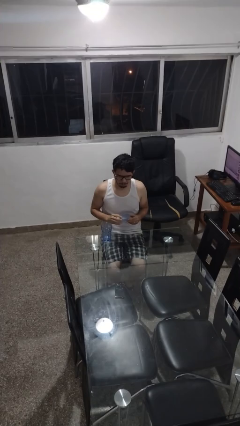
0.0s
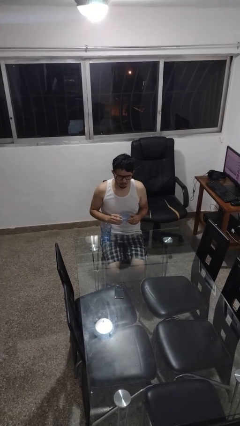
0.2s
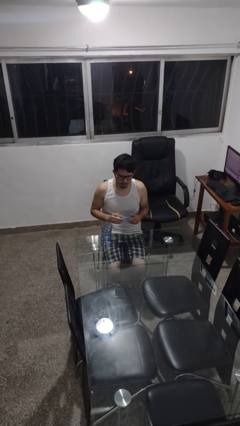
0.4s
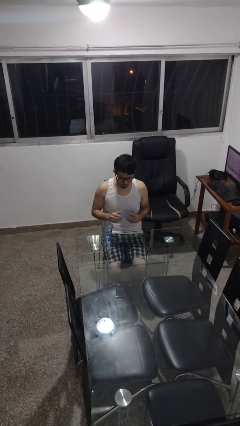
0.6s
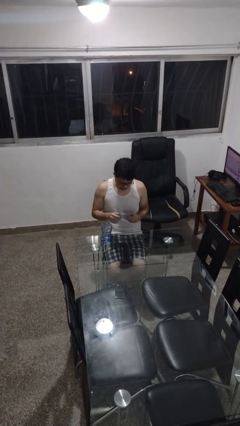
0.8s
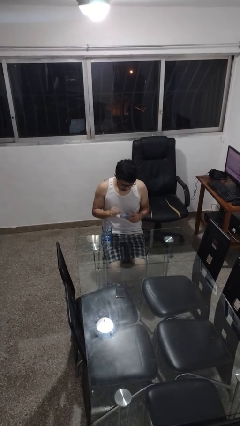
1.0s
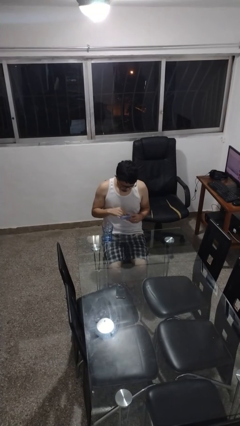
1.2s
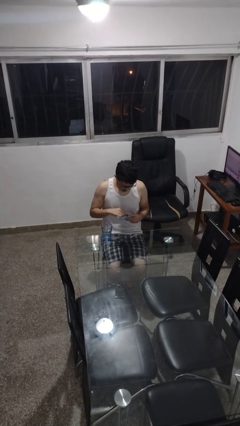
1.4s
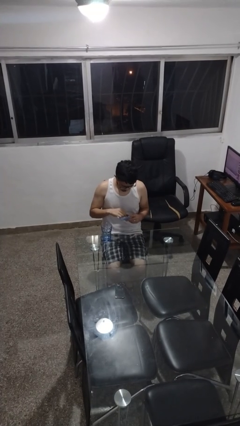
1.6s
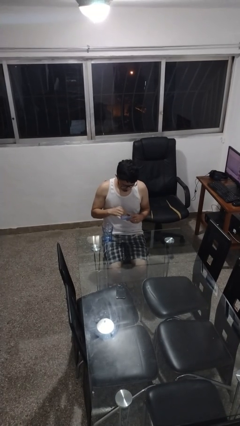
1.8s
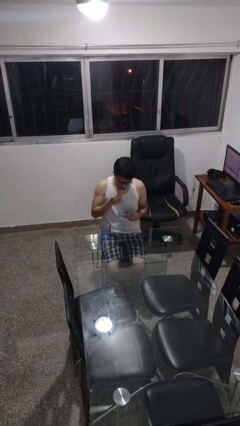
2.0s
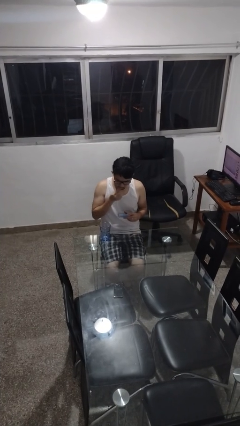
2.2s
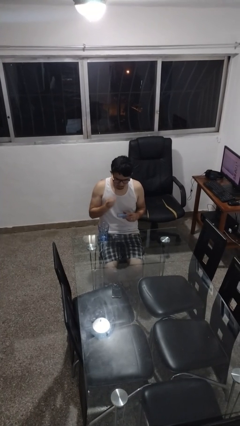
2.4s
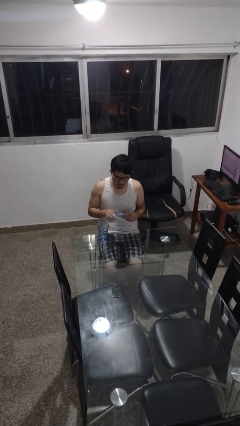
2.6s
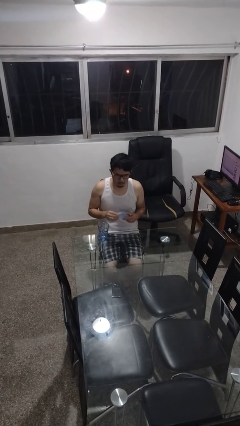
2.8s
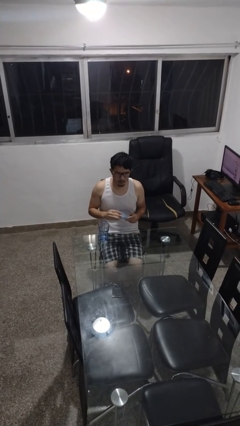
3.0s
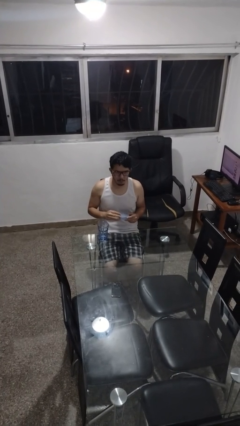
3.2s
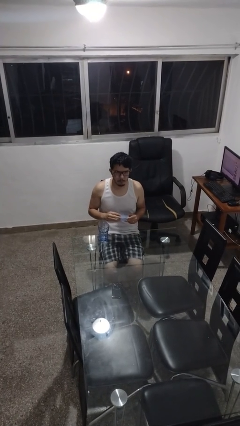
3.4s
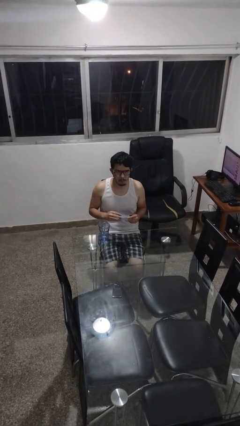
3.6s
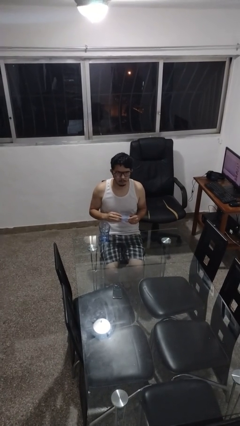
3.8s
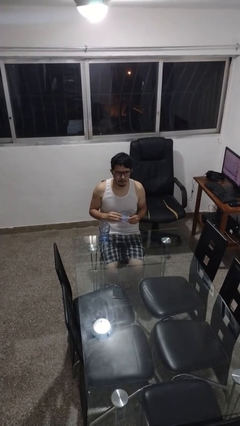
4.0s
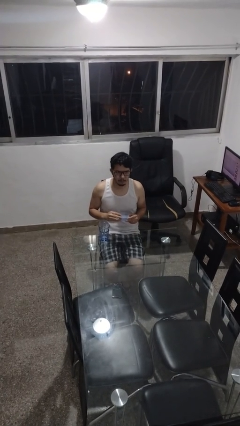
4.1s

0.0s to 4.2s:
person takes medicine pills

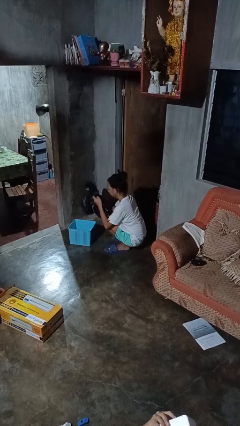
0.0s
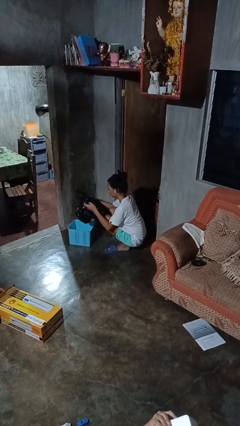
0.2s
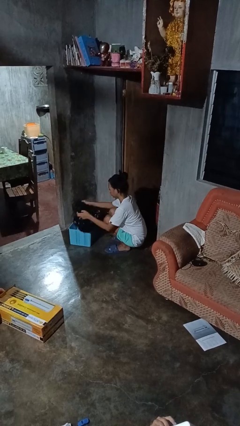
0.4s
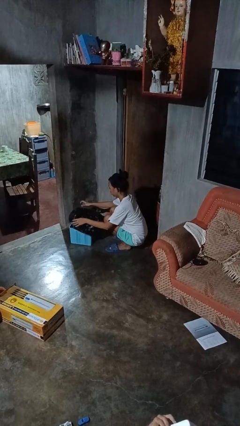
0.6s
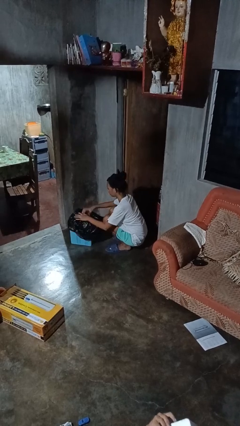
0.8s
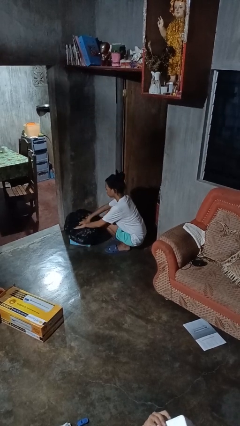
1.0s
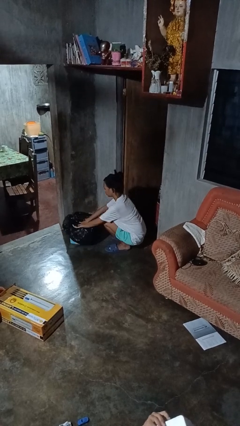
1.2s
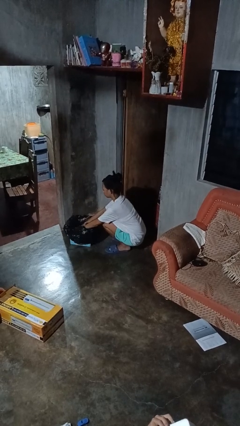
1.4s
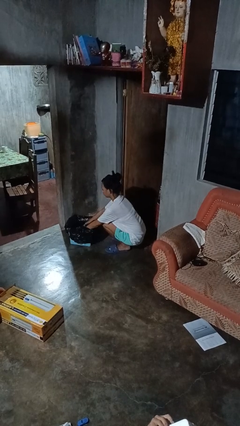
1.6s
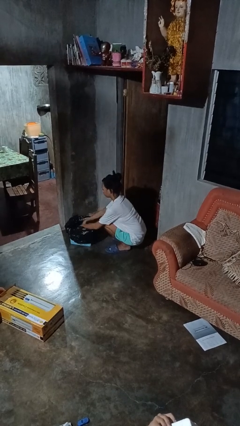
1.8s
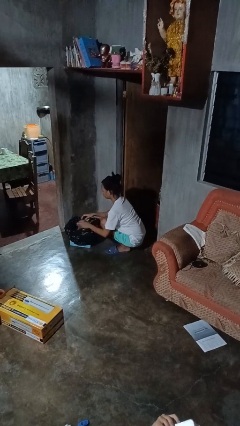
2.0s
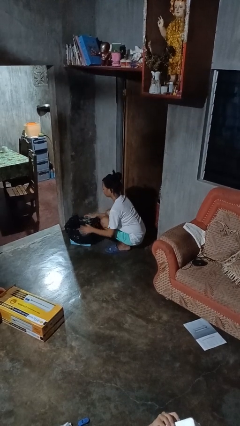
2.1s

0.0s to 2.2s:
person inserts trashbag into trashcan

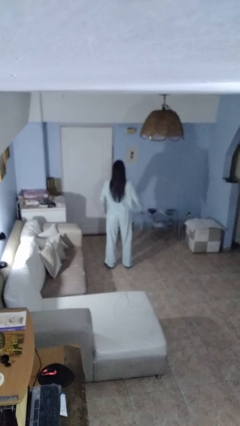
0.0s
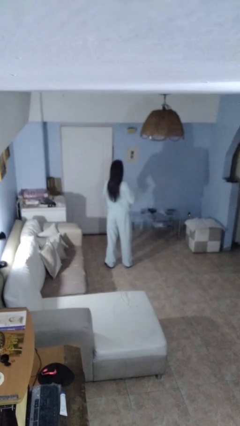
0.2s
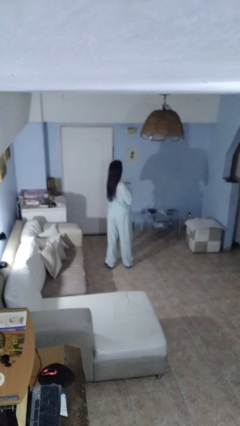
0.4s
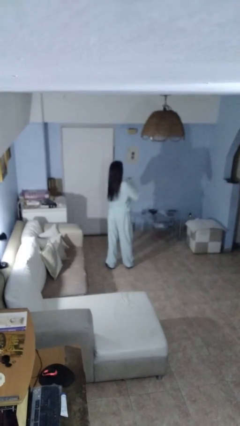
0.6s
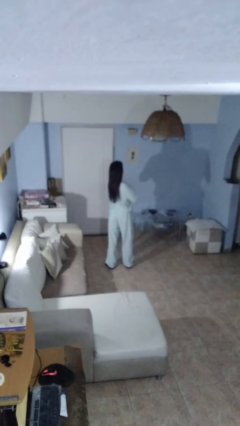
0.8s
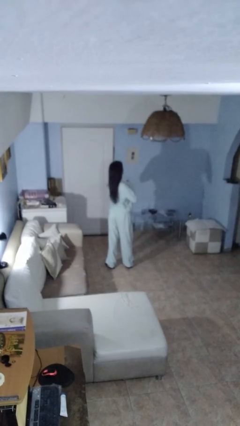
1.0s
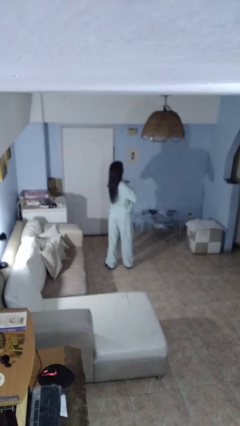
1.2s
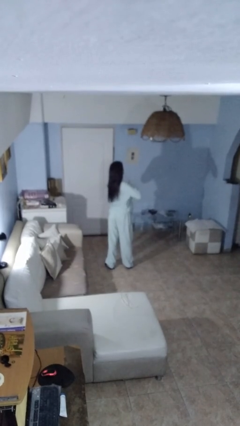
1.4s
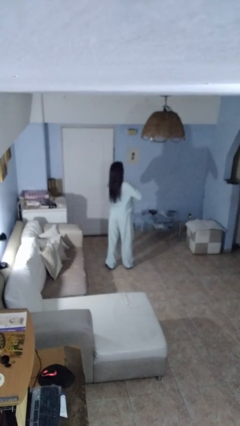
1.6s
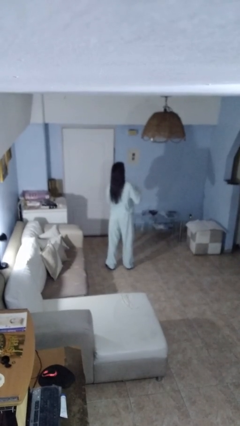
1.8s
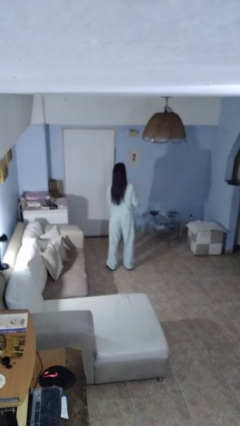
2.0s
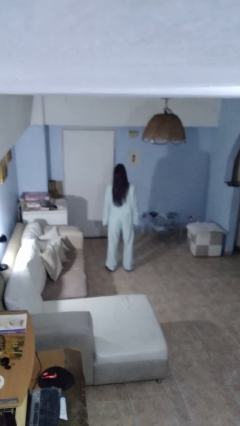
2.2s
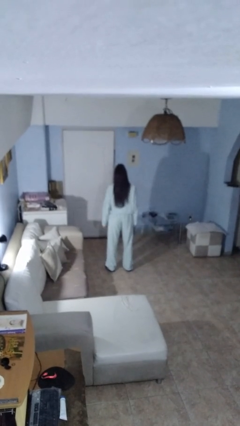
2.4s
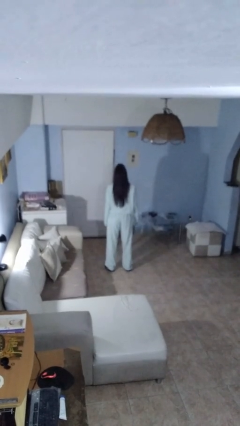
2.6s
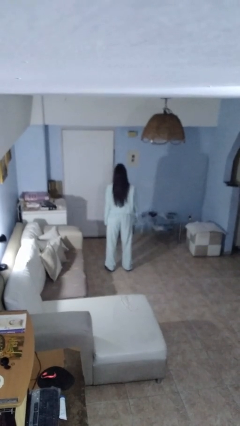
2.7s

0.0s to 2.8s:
person drums on chest

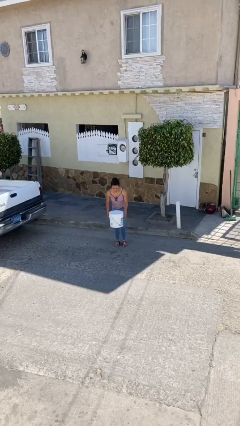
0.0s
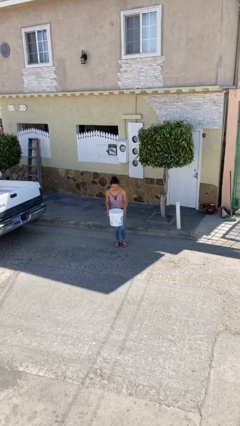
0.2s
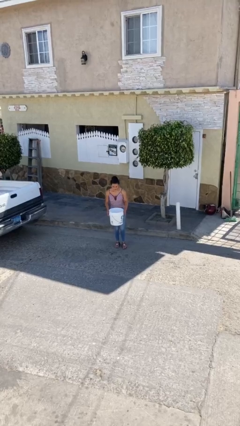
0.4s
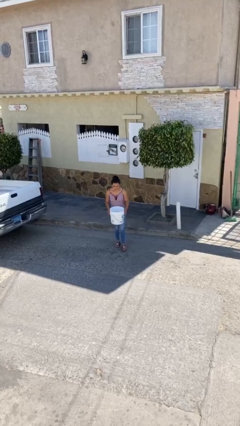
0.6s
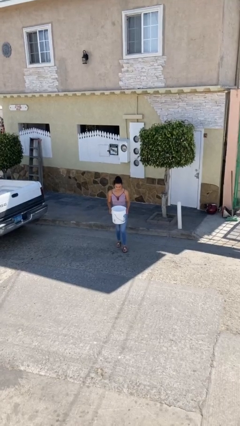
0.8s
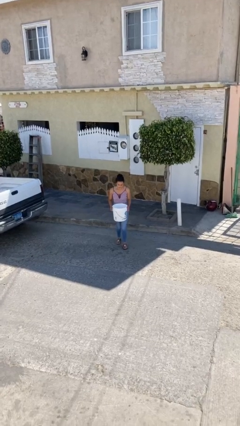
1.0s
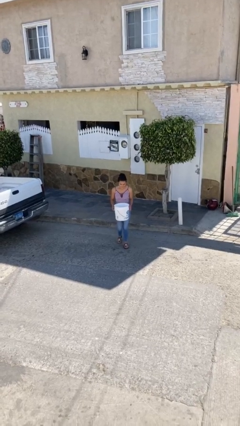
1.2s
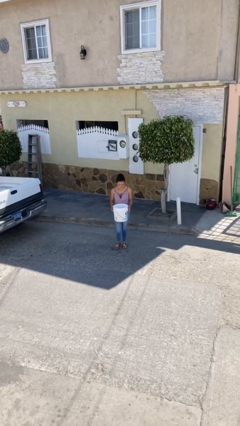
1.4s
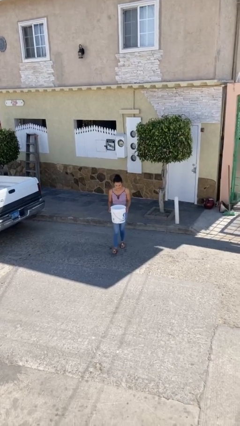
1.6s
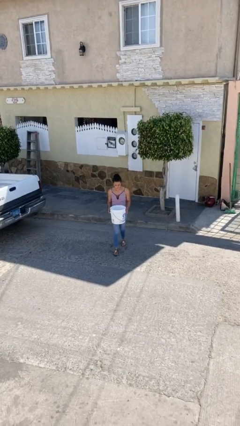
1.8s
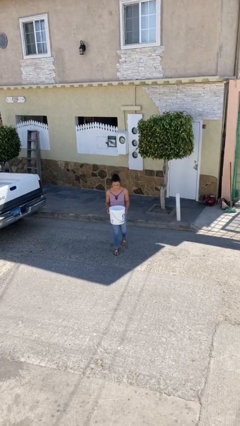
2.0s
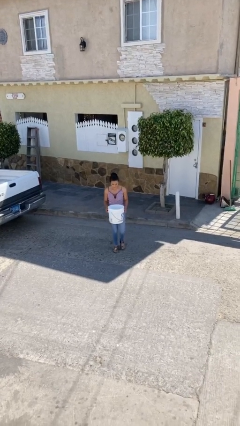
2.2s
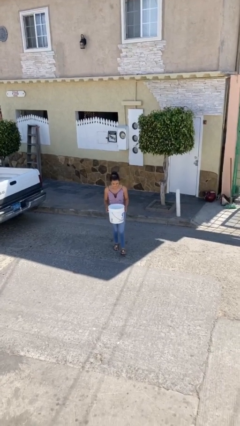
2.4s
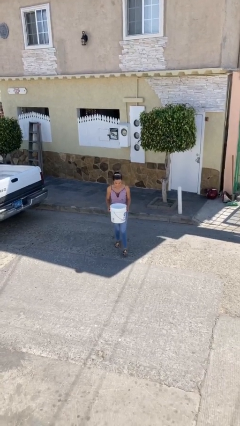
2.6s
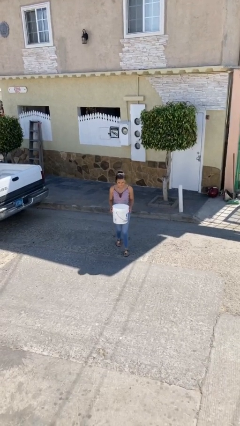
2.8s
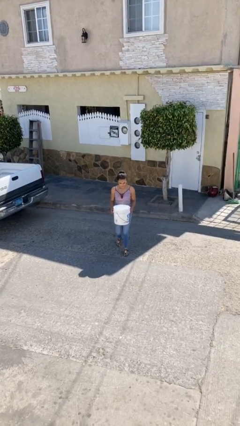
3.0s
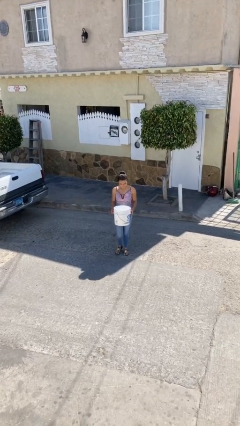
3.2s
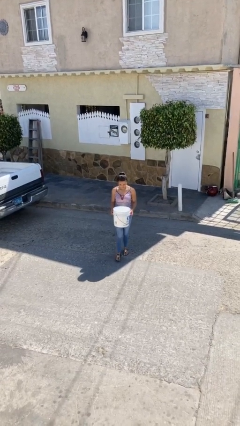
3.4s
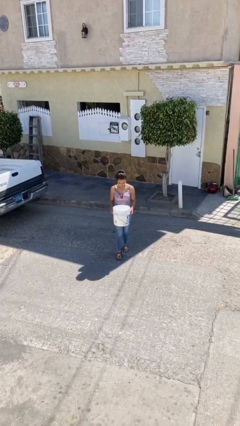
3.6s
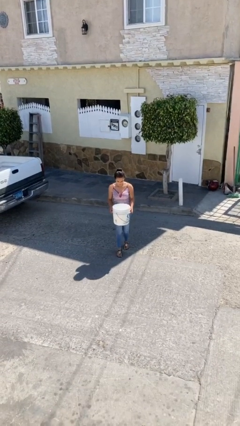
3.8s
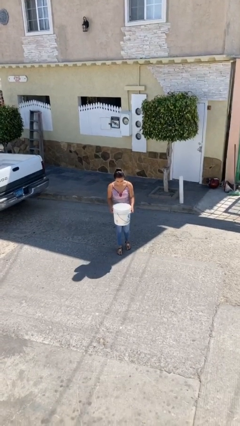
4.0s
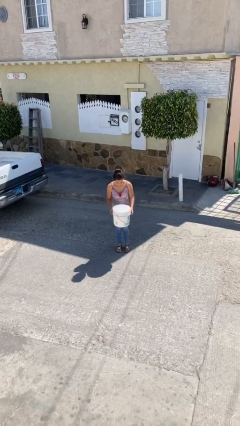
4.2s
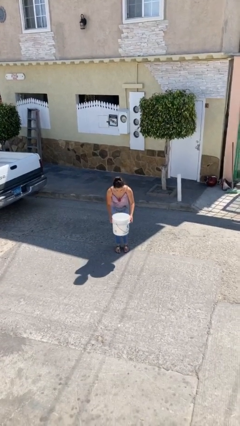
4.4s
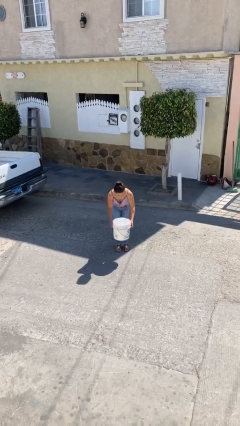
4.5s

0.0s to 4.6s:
person carries heavy object

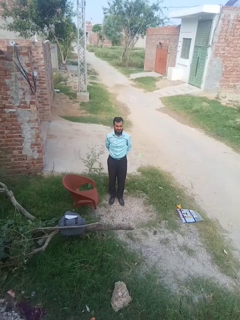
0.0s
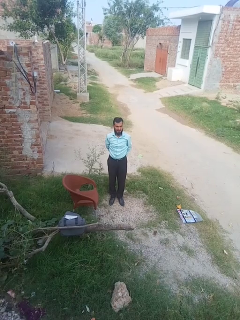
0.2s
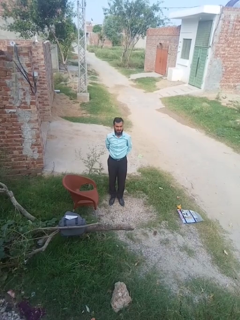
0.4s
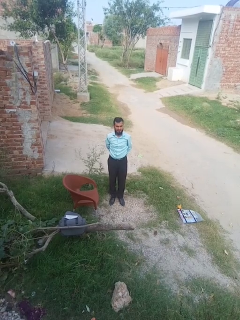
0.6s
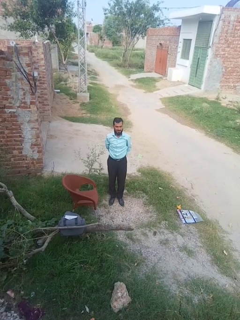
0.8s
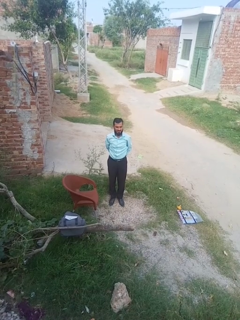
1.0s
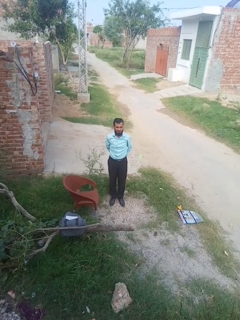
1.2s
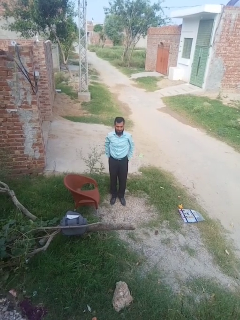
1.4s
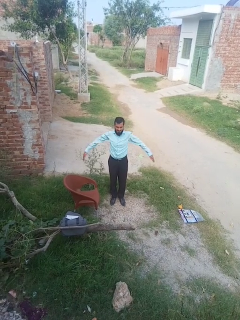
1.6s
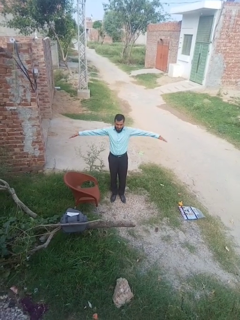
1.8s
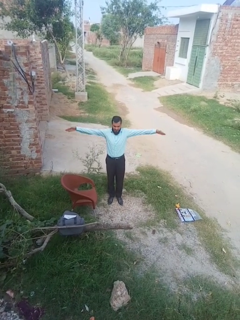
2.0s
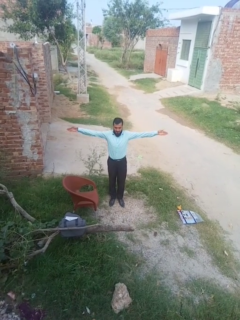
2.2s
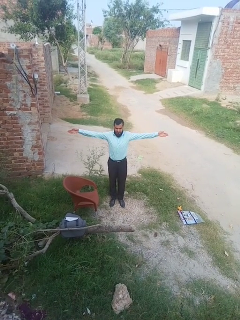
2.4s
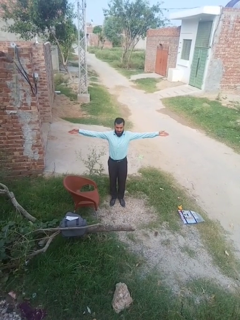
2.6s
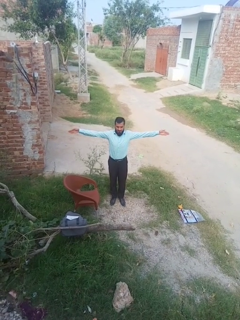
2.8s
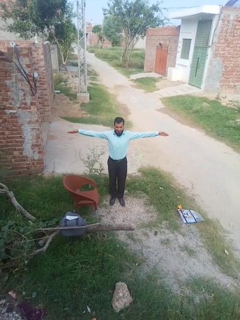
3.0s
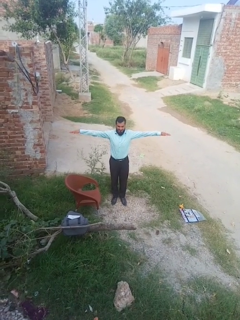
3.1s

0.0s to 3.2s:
person stretches arms to side

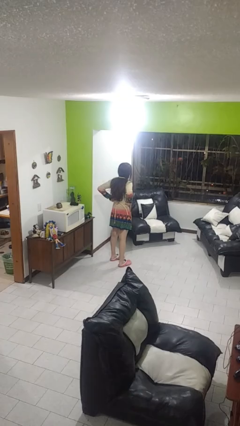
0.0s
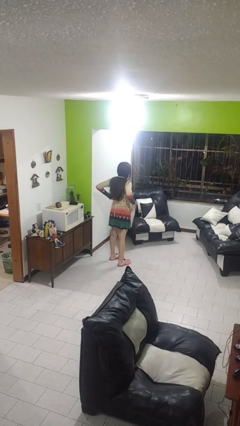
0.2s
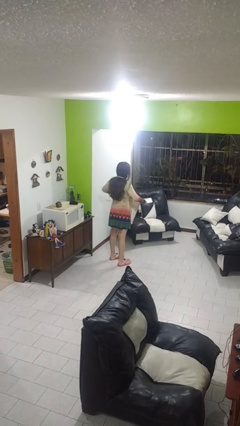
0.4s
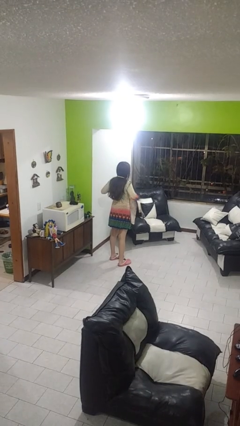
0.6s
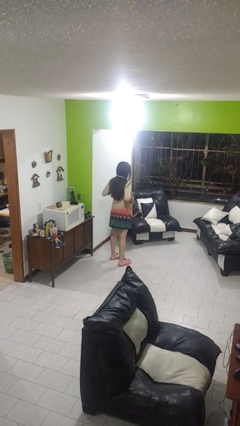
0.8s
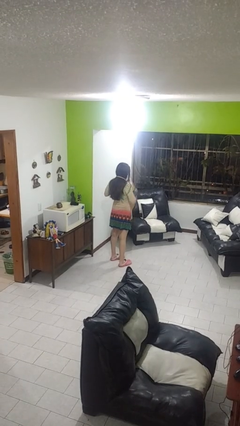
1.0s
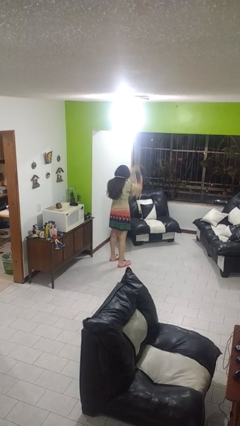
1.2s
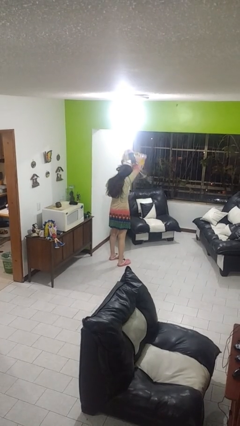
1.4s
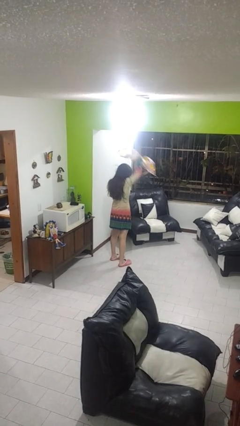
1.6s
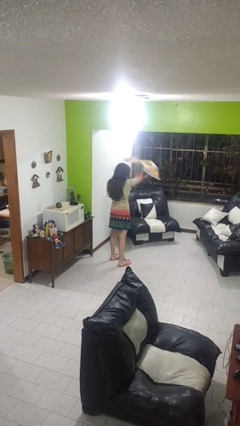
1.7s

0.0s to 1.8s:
person takes off apron
